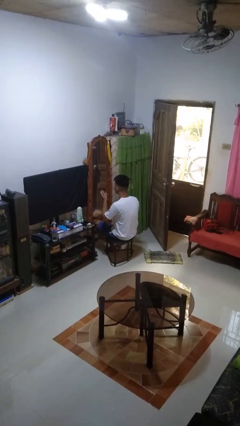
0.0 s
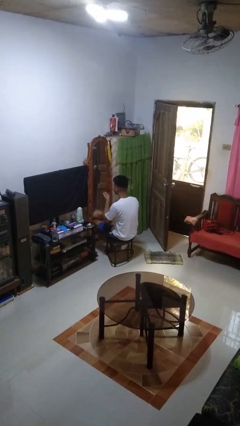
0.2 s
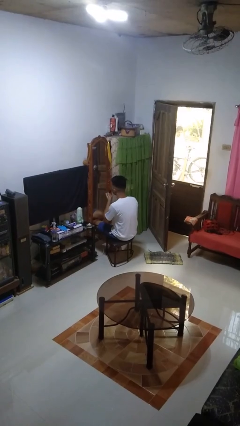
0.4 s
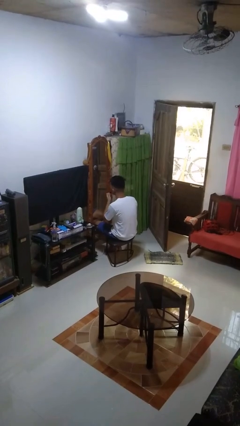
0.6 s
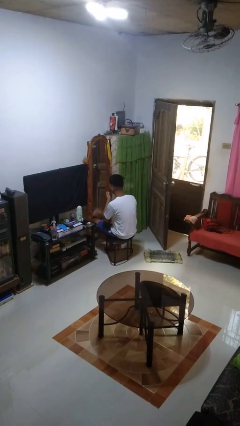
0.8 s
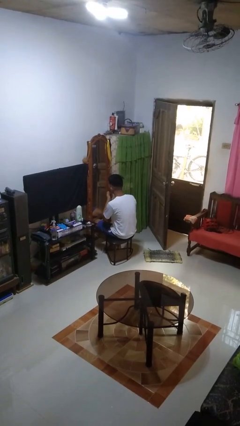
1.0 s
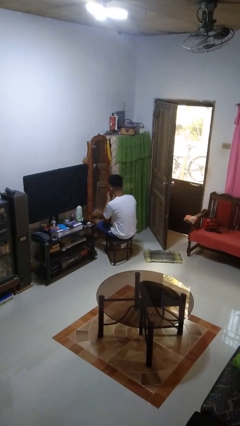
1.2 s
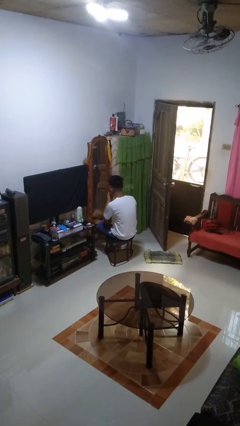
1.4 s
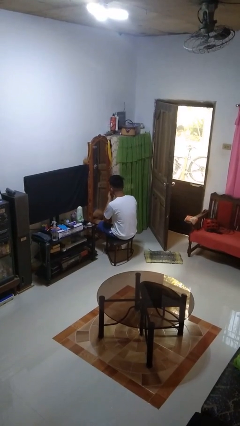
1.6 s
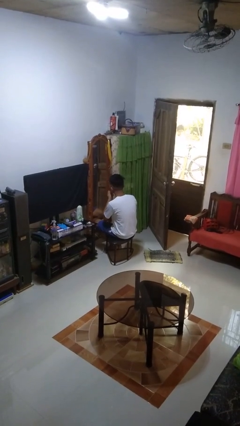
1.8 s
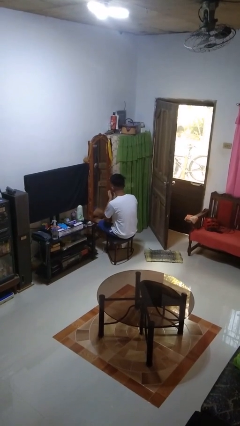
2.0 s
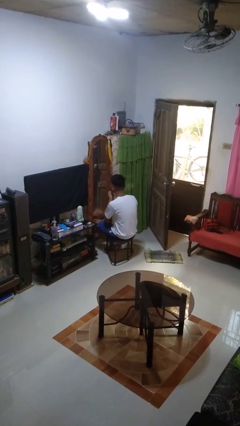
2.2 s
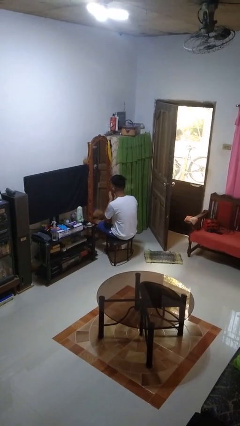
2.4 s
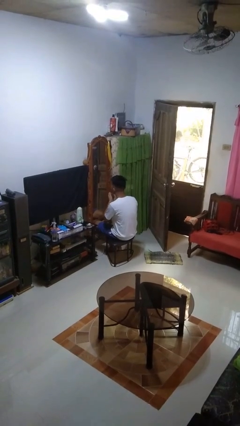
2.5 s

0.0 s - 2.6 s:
person applies lip makeup

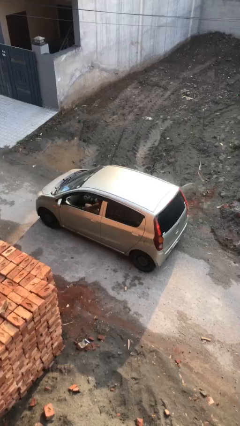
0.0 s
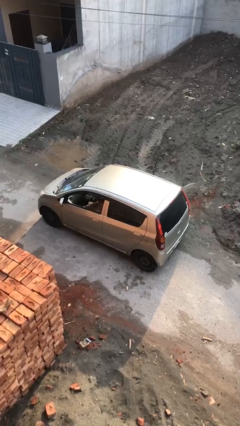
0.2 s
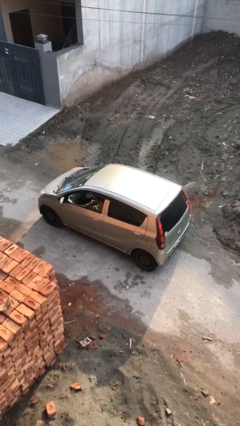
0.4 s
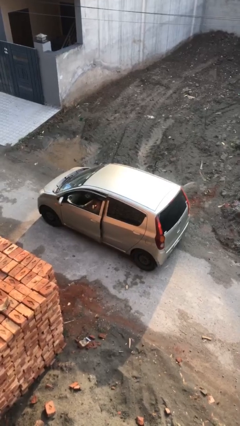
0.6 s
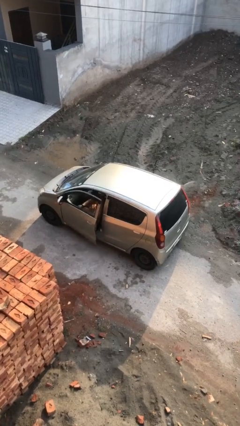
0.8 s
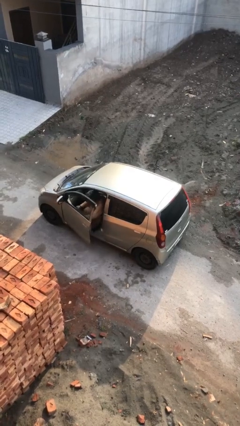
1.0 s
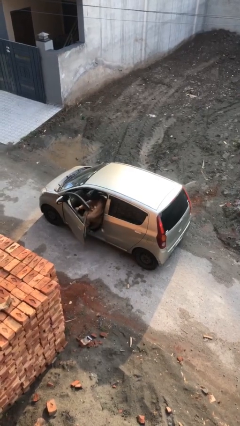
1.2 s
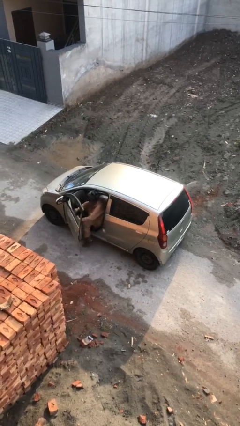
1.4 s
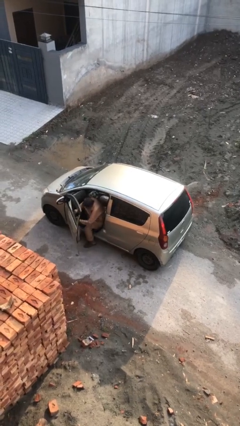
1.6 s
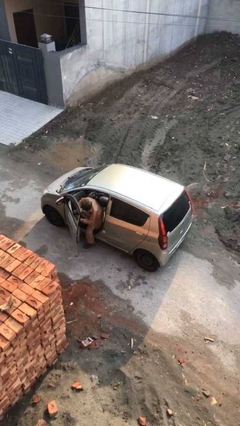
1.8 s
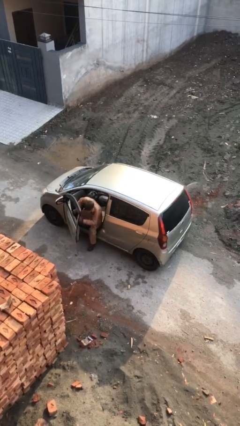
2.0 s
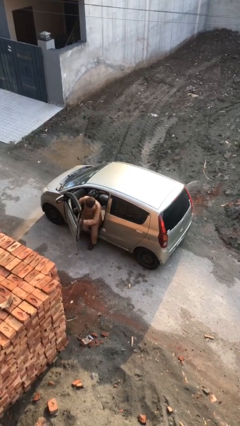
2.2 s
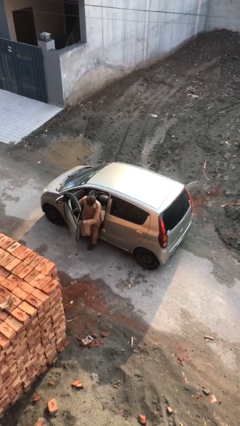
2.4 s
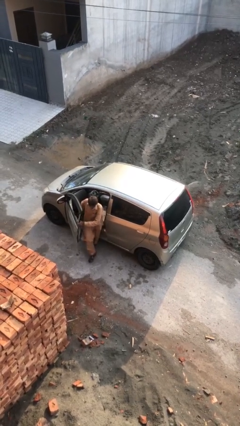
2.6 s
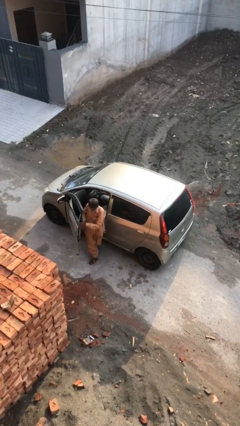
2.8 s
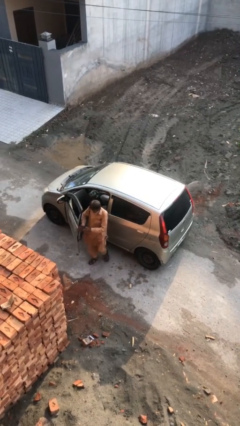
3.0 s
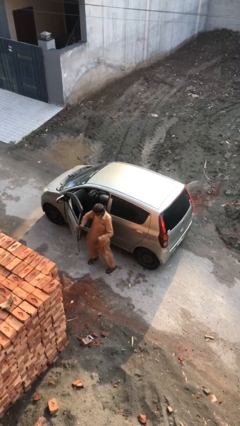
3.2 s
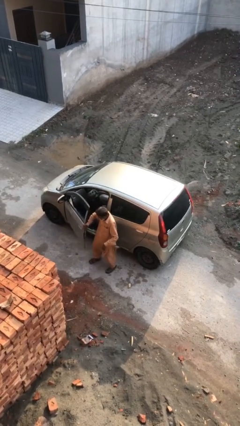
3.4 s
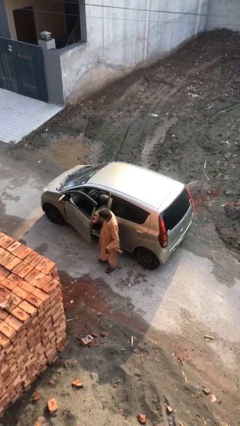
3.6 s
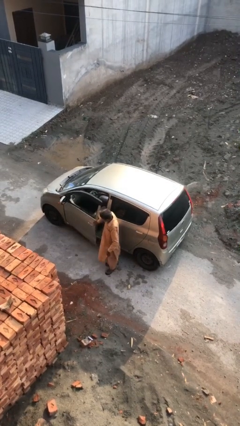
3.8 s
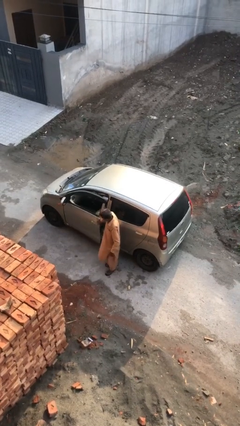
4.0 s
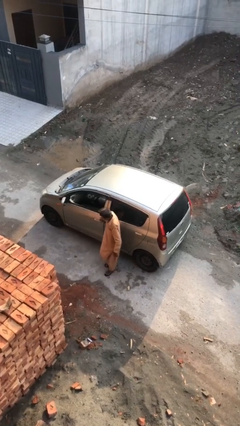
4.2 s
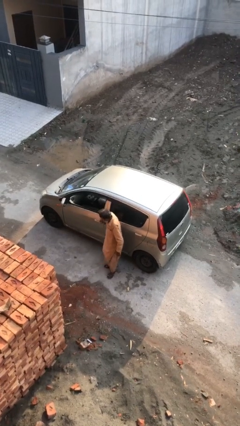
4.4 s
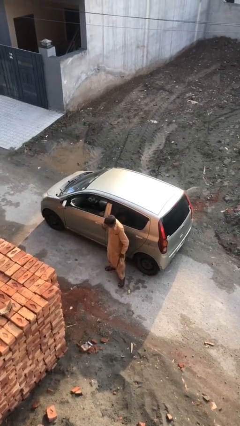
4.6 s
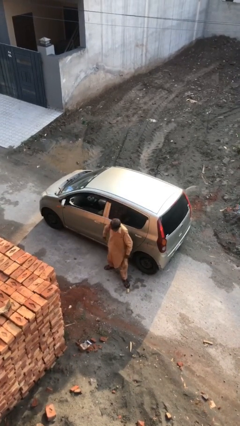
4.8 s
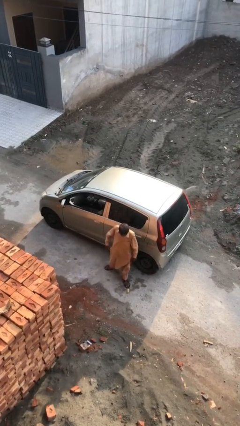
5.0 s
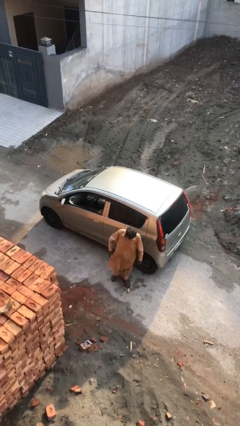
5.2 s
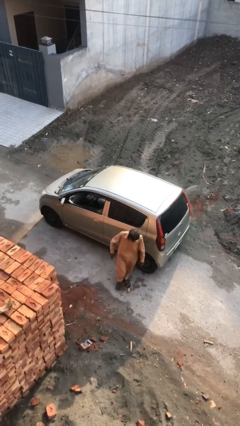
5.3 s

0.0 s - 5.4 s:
car drops off person

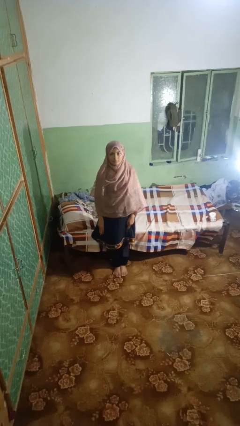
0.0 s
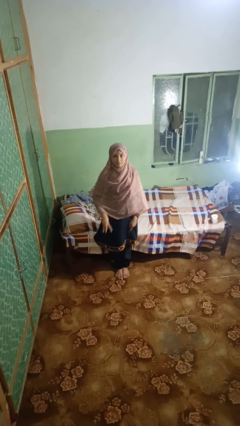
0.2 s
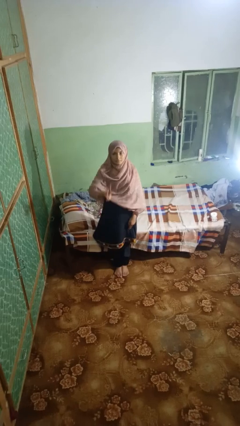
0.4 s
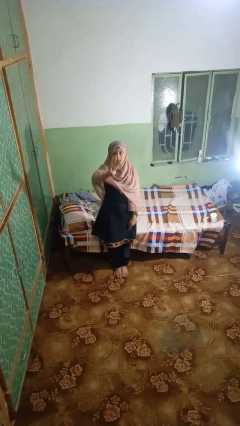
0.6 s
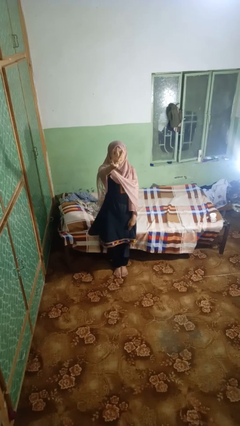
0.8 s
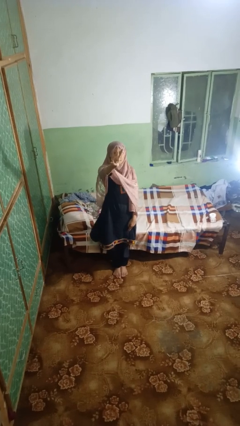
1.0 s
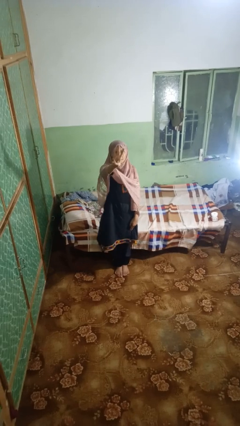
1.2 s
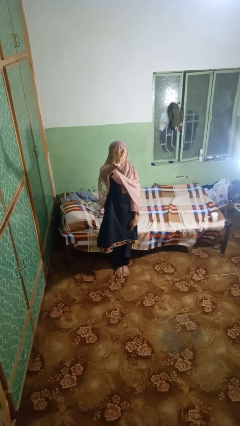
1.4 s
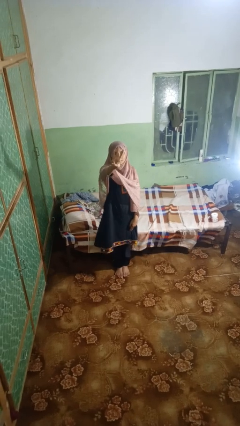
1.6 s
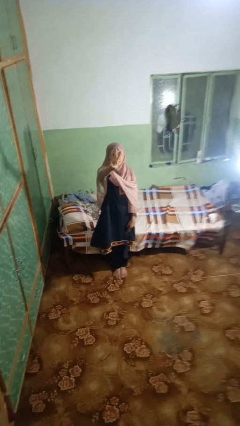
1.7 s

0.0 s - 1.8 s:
person gestures number three

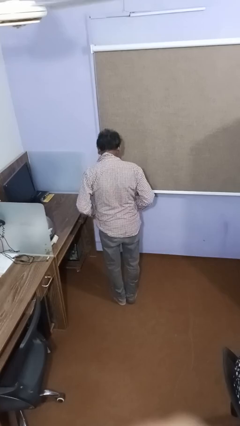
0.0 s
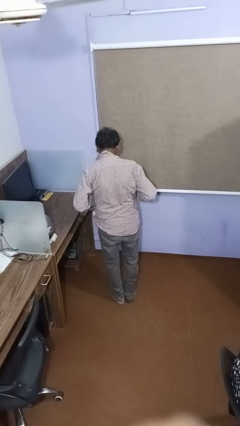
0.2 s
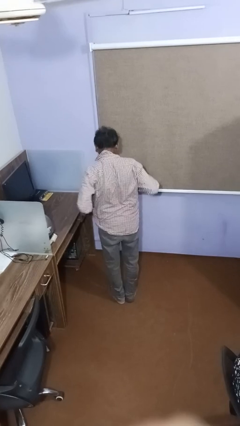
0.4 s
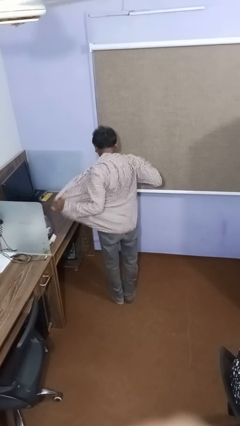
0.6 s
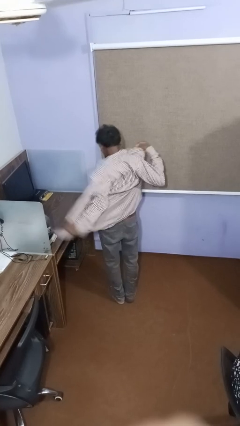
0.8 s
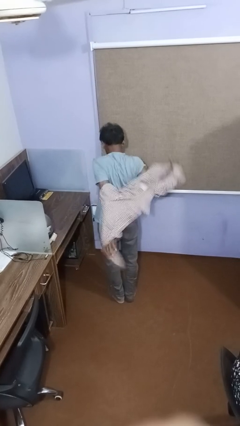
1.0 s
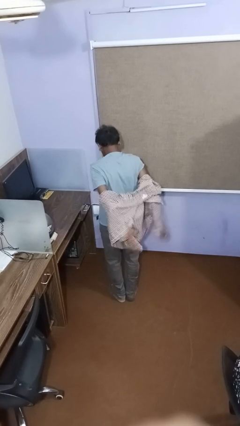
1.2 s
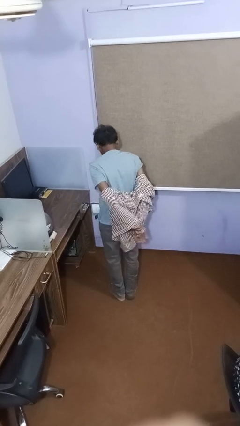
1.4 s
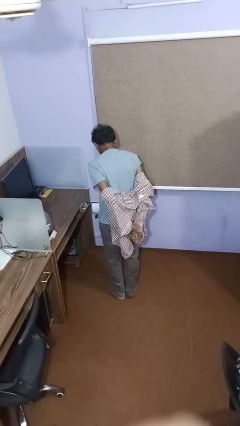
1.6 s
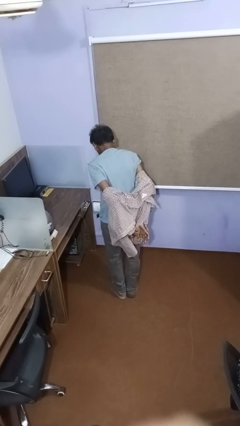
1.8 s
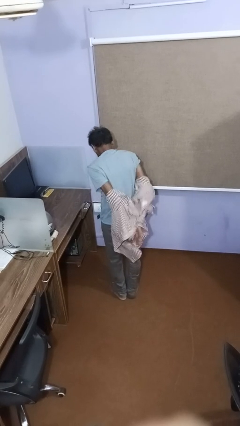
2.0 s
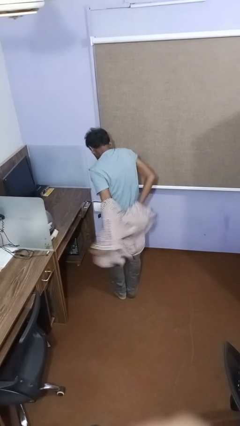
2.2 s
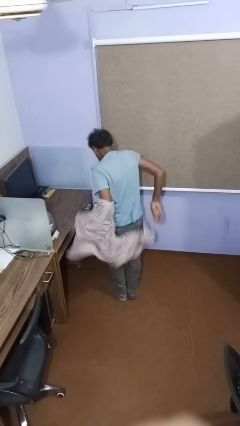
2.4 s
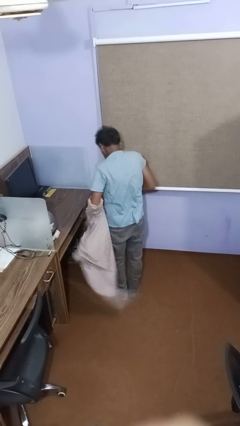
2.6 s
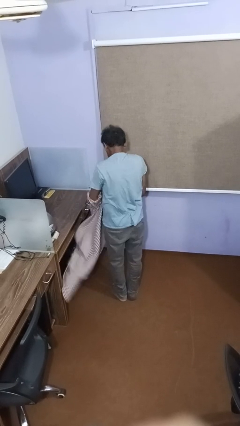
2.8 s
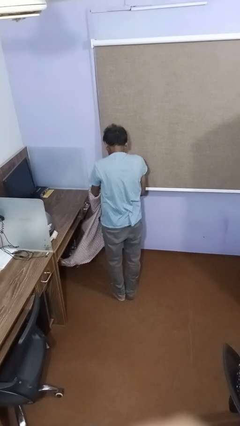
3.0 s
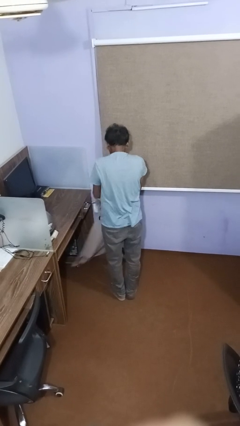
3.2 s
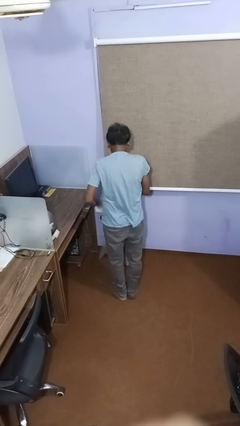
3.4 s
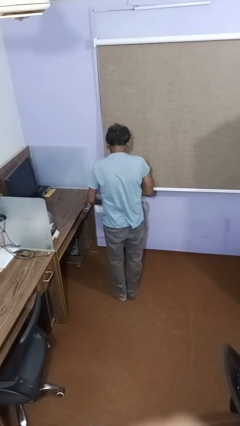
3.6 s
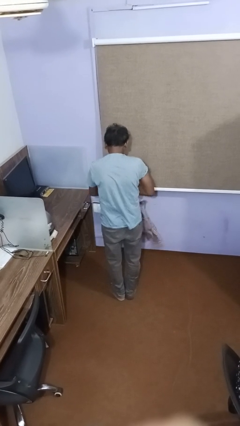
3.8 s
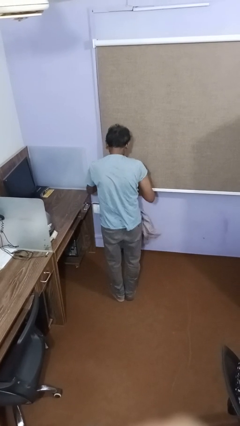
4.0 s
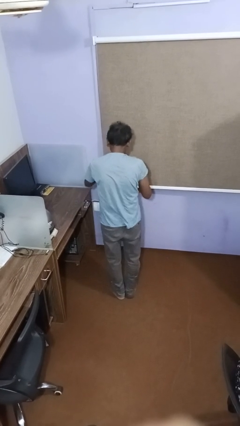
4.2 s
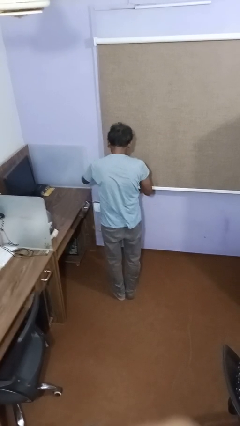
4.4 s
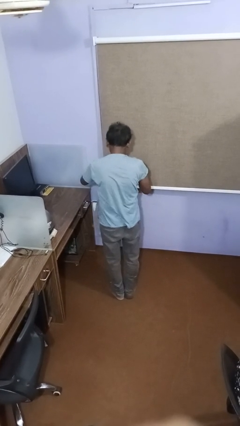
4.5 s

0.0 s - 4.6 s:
person takes off shirt

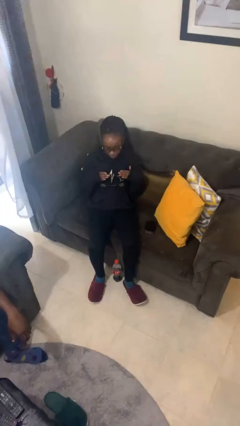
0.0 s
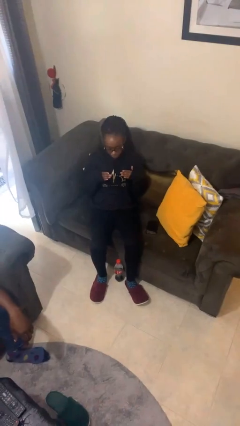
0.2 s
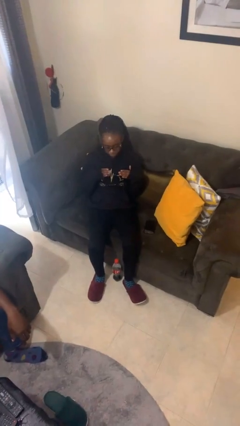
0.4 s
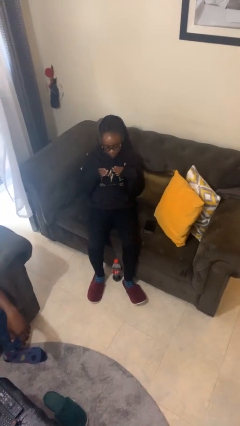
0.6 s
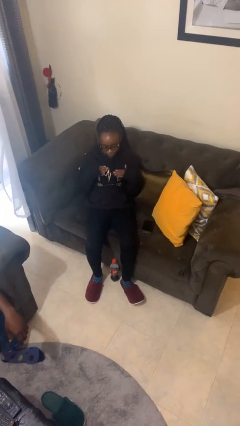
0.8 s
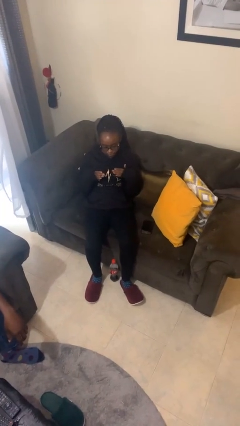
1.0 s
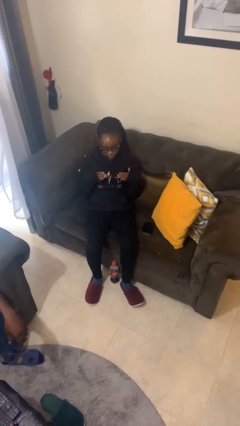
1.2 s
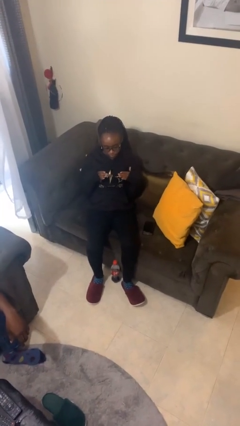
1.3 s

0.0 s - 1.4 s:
person drums on chest

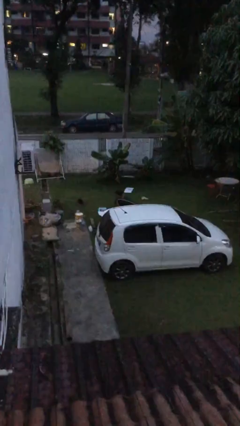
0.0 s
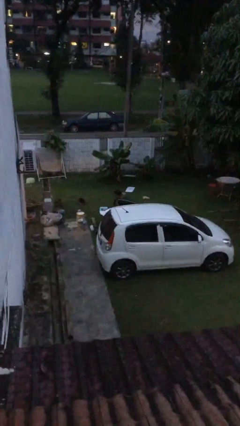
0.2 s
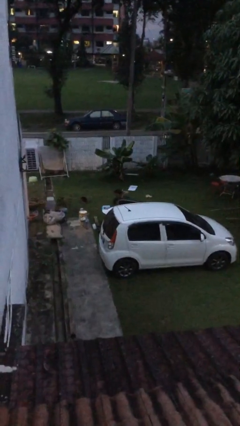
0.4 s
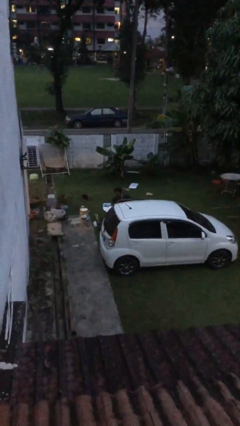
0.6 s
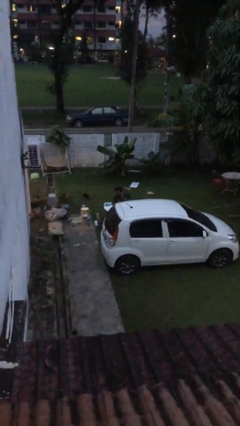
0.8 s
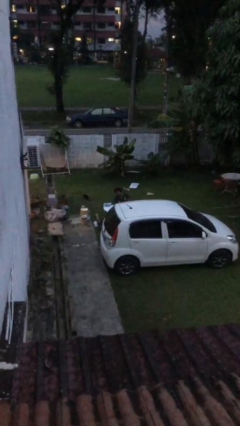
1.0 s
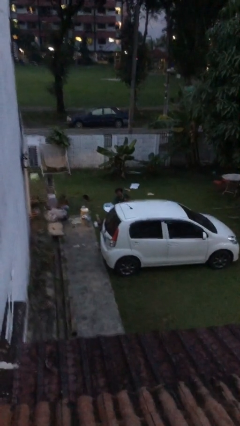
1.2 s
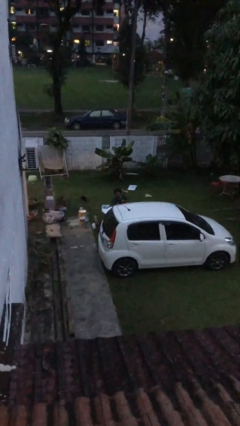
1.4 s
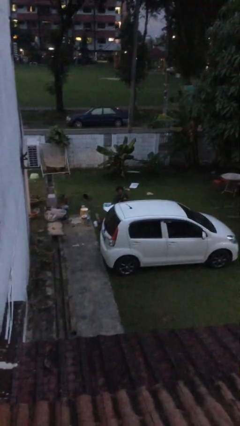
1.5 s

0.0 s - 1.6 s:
person closes car door
